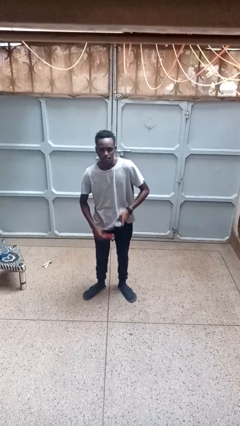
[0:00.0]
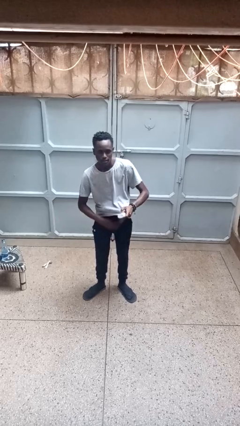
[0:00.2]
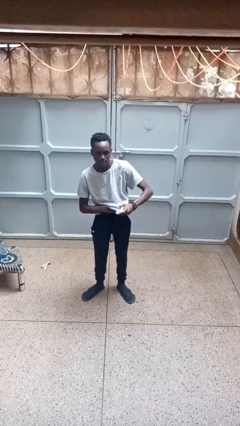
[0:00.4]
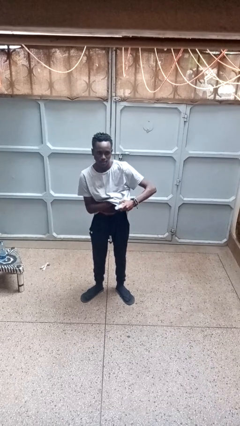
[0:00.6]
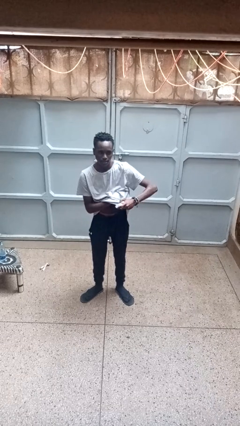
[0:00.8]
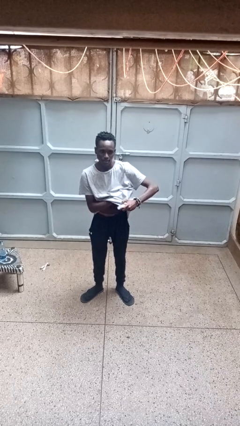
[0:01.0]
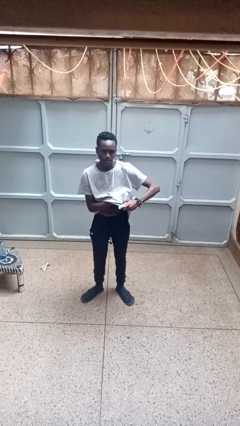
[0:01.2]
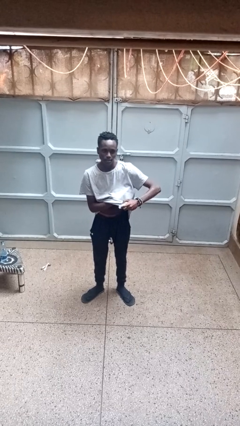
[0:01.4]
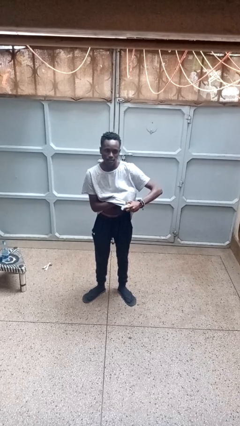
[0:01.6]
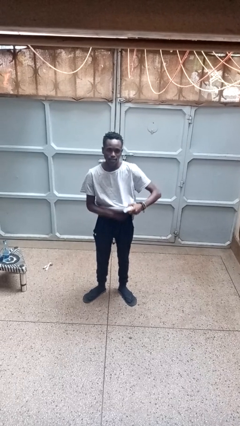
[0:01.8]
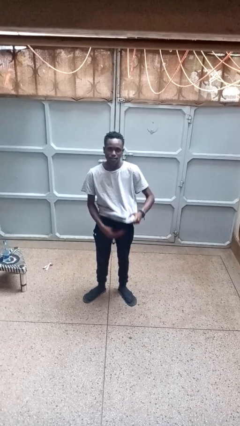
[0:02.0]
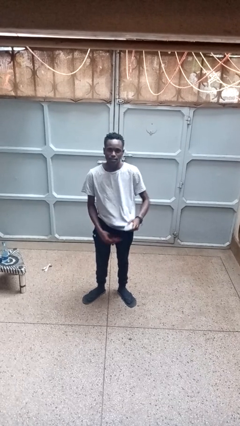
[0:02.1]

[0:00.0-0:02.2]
person applies deodorant

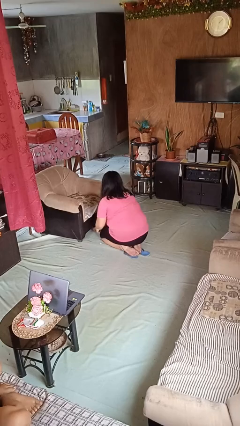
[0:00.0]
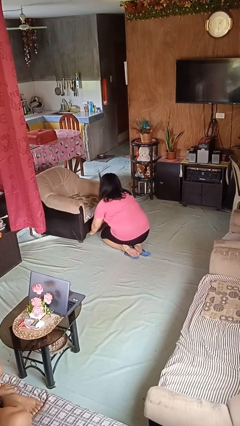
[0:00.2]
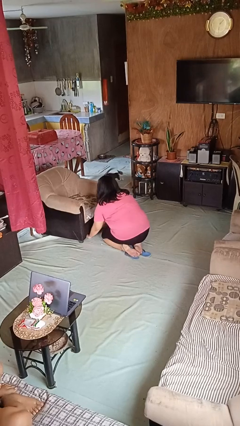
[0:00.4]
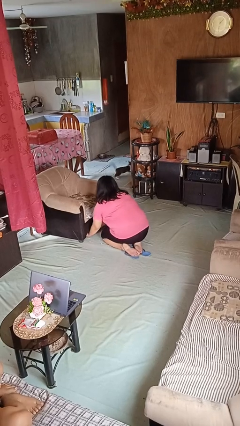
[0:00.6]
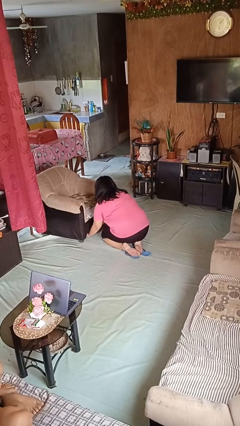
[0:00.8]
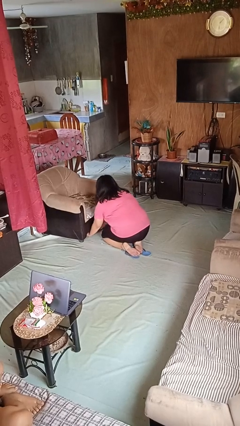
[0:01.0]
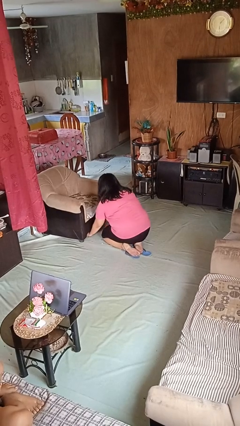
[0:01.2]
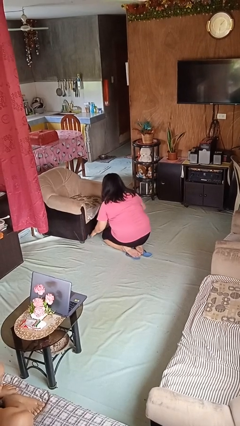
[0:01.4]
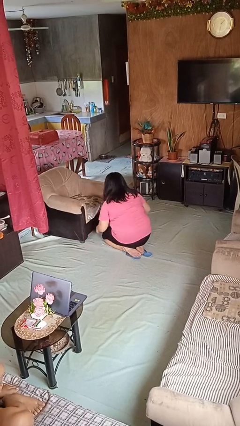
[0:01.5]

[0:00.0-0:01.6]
person searches under couch

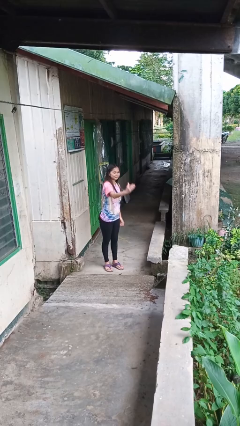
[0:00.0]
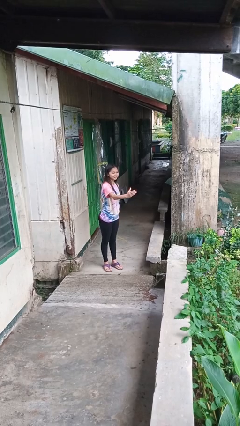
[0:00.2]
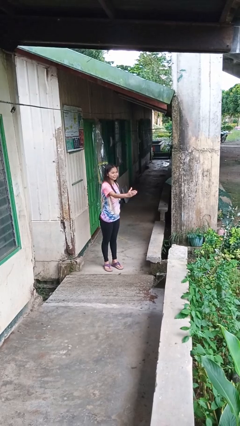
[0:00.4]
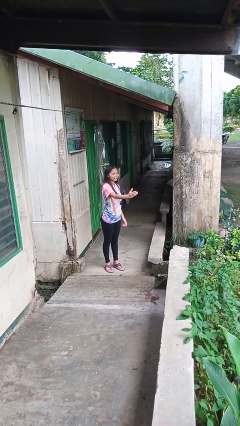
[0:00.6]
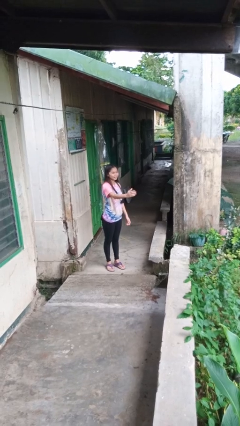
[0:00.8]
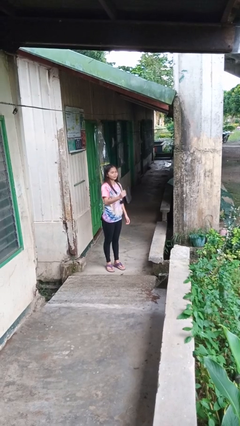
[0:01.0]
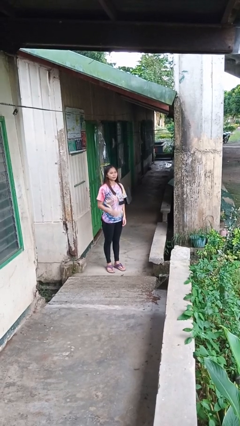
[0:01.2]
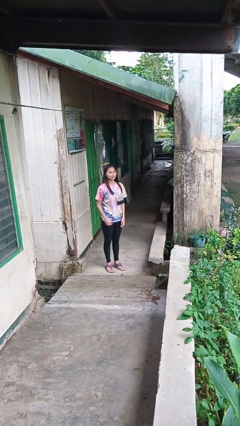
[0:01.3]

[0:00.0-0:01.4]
person karate chop

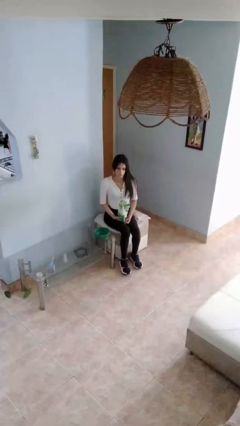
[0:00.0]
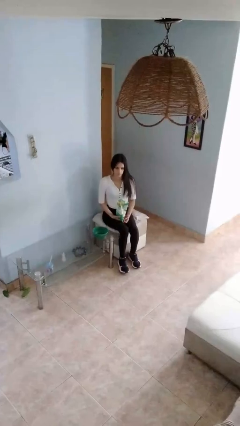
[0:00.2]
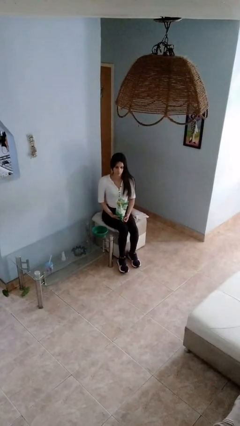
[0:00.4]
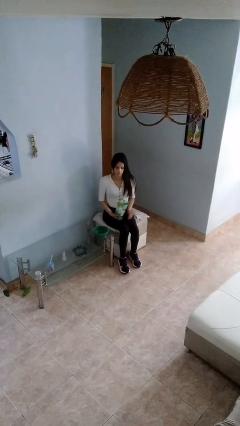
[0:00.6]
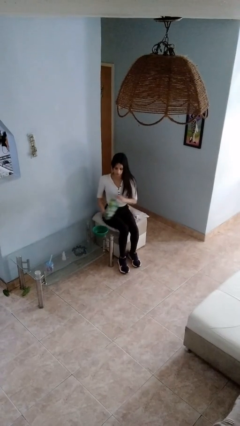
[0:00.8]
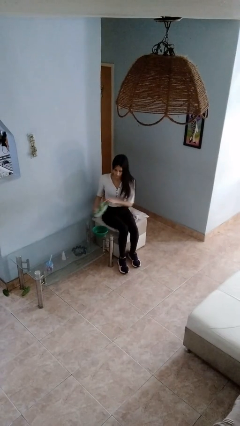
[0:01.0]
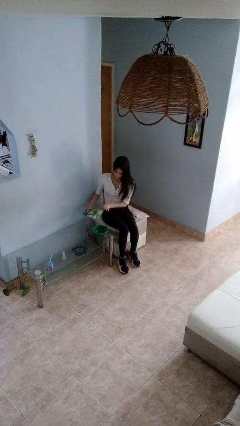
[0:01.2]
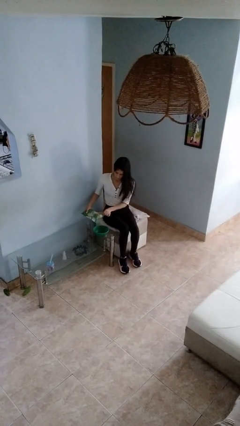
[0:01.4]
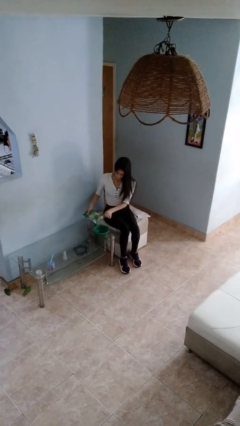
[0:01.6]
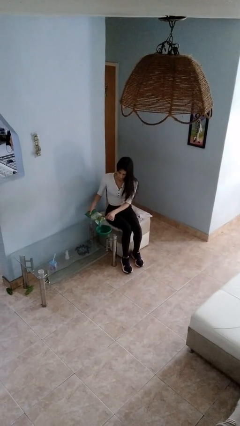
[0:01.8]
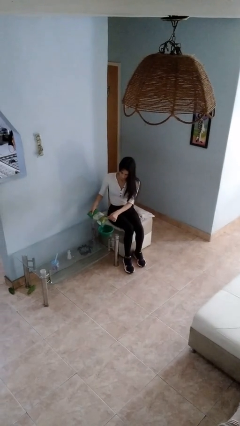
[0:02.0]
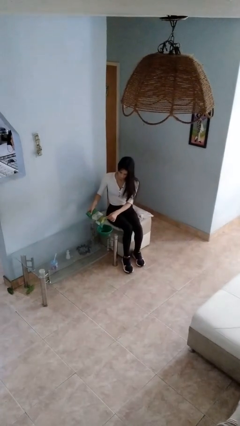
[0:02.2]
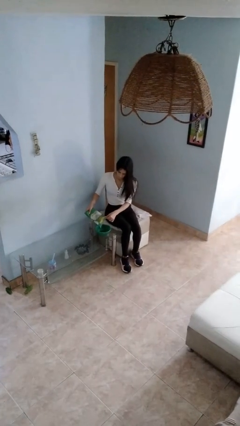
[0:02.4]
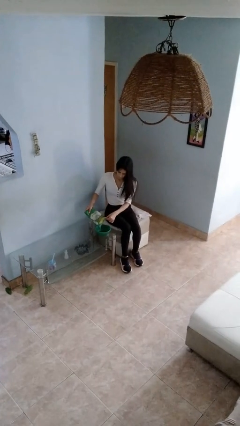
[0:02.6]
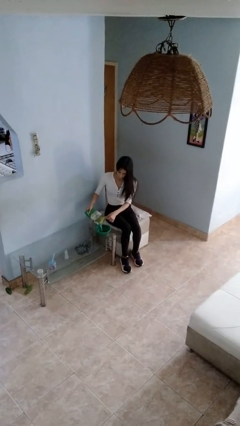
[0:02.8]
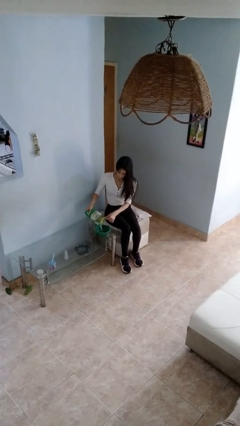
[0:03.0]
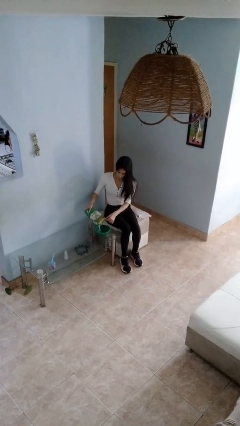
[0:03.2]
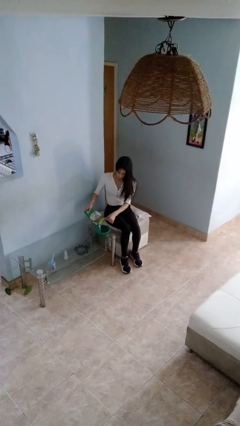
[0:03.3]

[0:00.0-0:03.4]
person pours into bowl

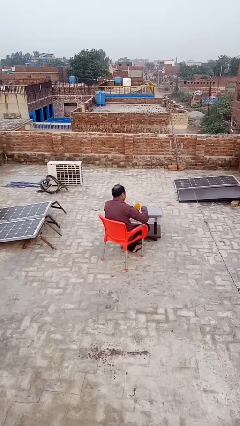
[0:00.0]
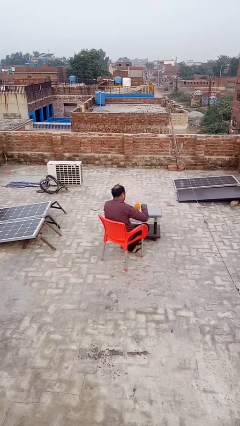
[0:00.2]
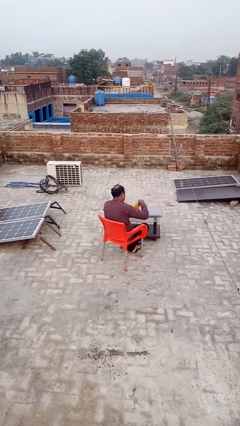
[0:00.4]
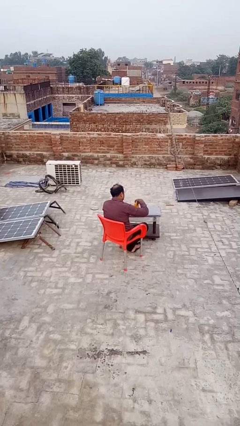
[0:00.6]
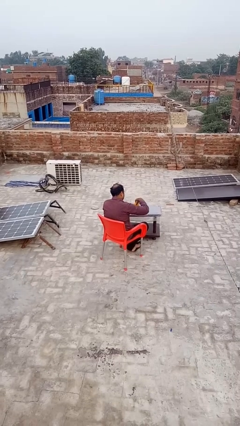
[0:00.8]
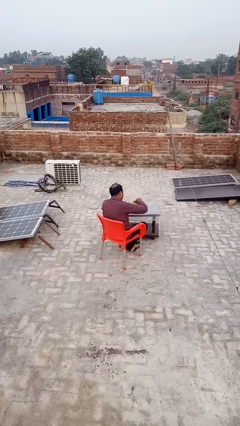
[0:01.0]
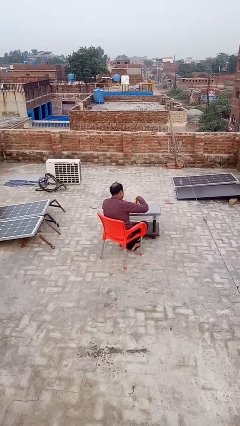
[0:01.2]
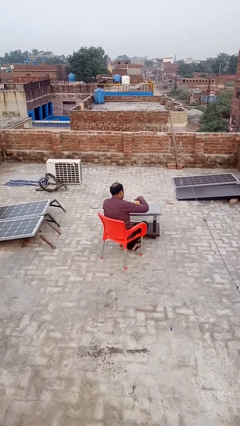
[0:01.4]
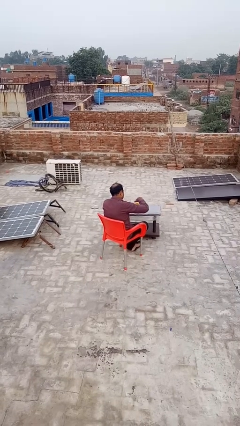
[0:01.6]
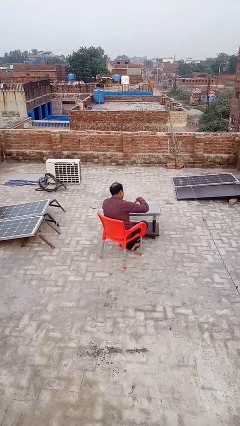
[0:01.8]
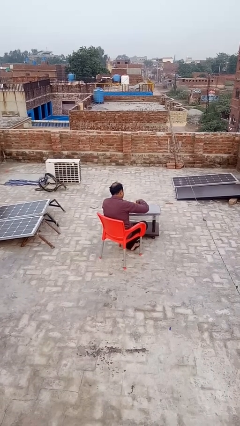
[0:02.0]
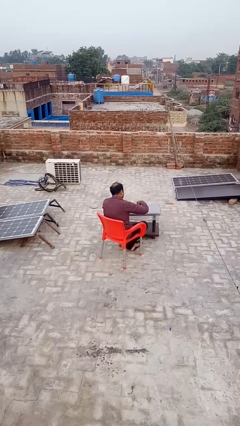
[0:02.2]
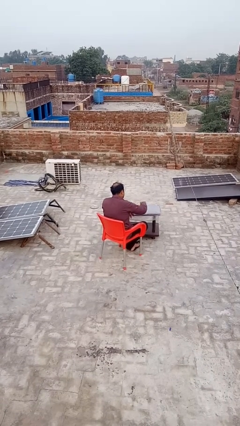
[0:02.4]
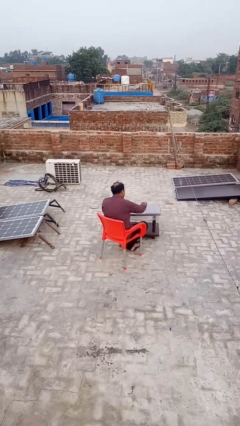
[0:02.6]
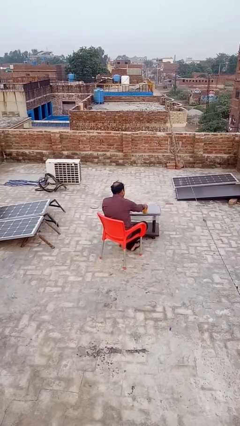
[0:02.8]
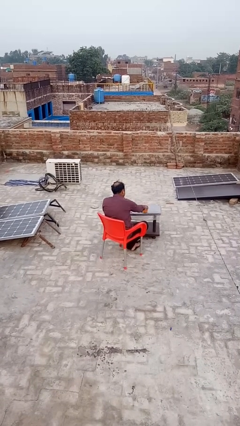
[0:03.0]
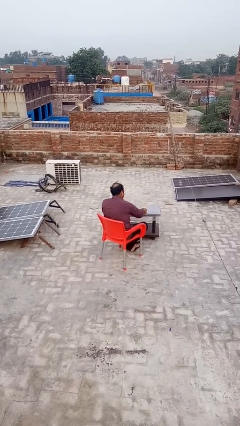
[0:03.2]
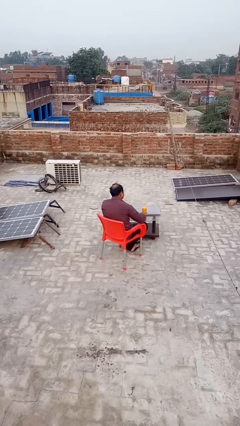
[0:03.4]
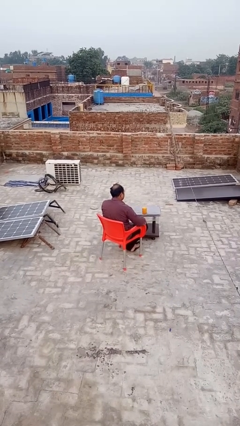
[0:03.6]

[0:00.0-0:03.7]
person closes jar

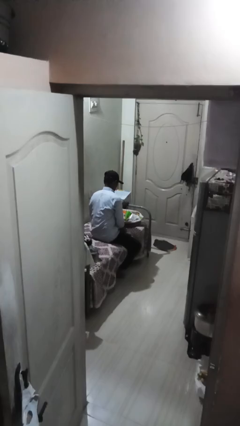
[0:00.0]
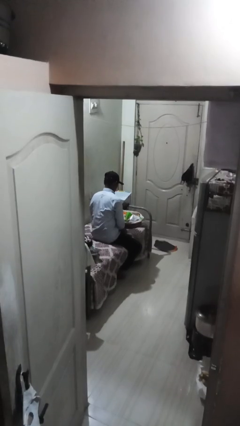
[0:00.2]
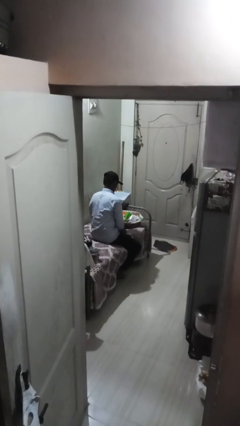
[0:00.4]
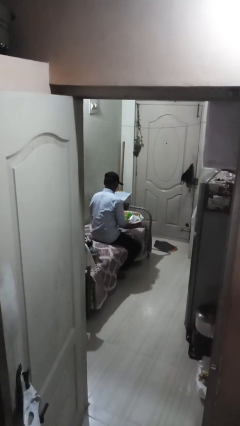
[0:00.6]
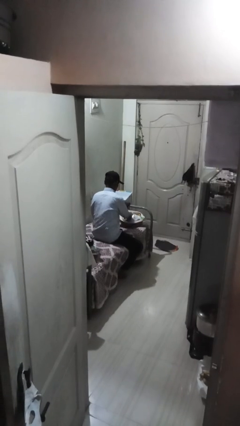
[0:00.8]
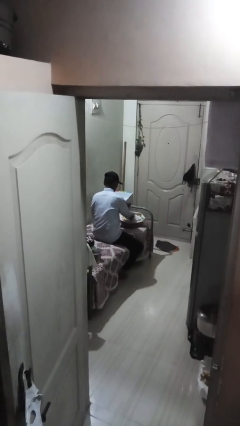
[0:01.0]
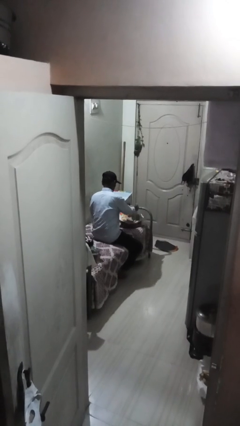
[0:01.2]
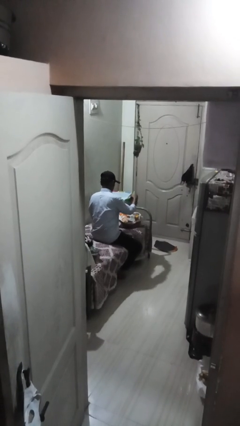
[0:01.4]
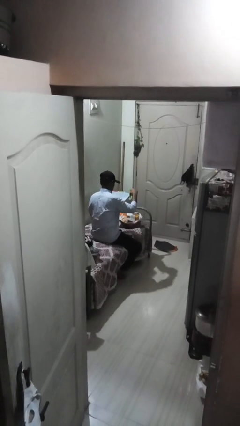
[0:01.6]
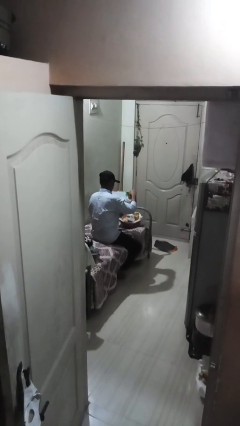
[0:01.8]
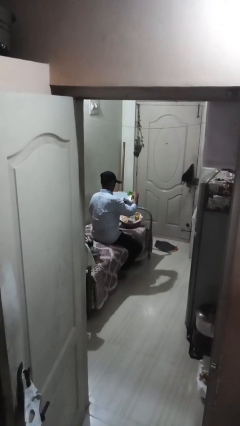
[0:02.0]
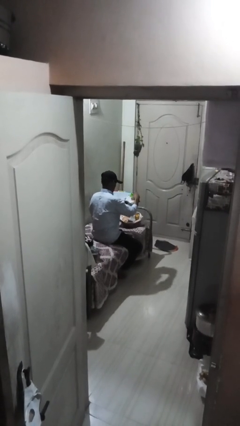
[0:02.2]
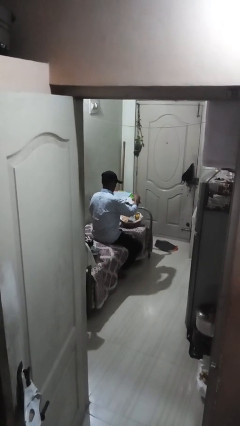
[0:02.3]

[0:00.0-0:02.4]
person takes object from bag

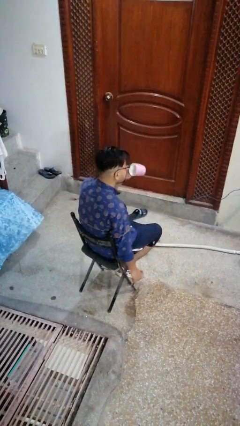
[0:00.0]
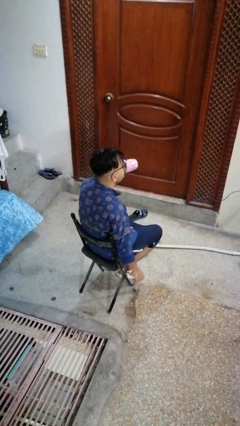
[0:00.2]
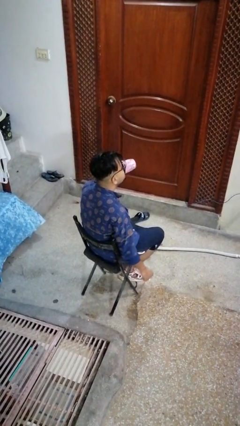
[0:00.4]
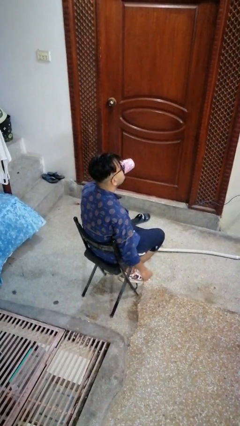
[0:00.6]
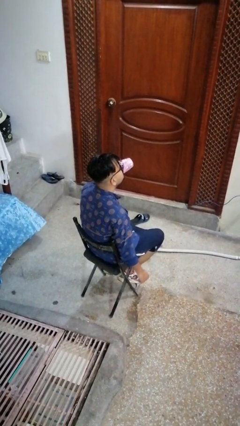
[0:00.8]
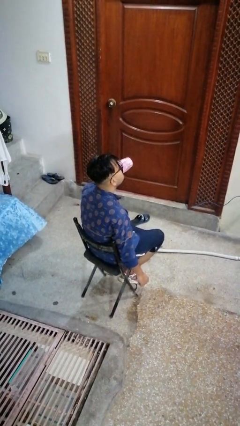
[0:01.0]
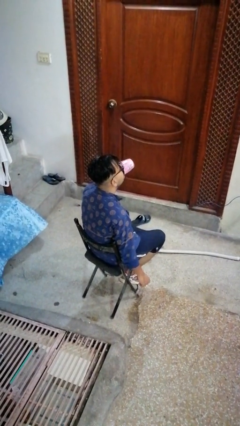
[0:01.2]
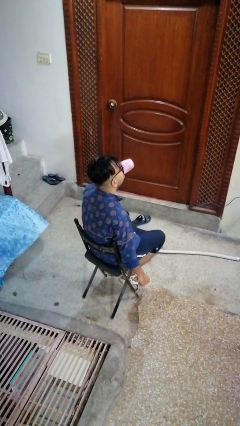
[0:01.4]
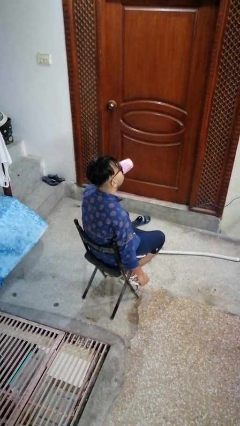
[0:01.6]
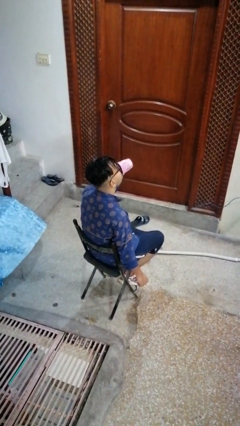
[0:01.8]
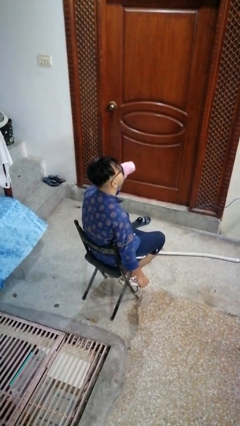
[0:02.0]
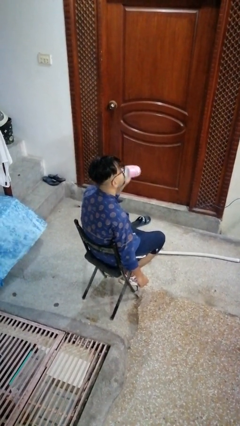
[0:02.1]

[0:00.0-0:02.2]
person drinks from mug

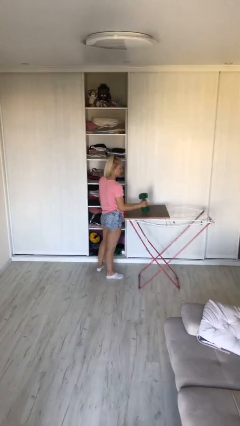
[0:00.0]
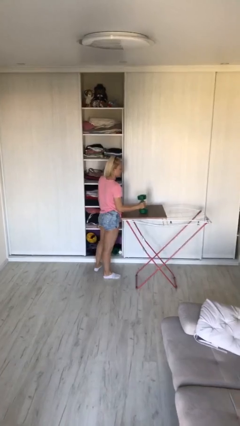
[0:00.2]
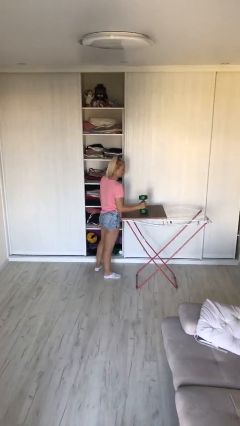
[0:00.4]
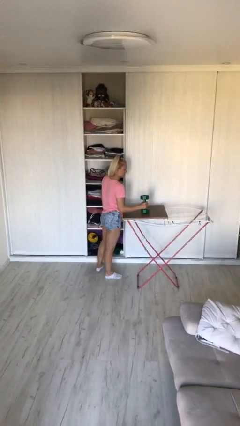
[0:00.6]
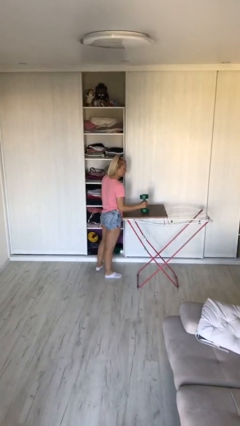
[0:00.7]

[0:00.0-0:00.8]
person puts down object on table
